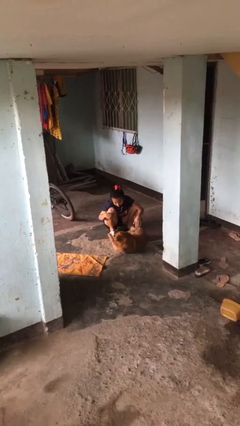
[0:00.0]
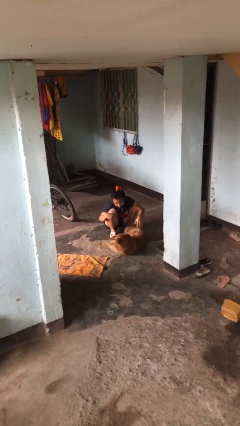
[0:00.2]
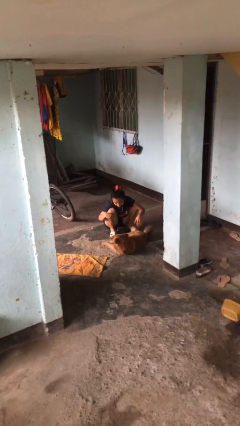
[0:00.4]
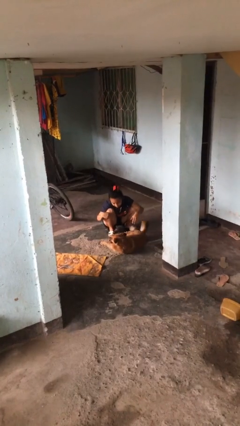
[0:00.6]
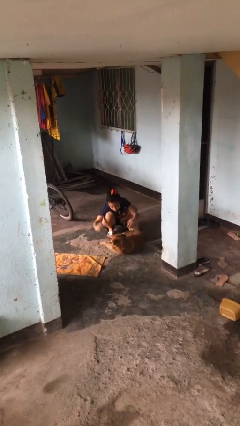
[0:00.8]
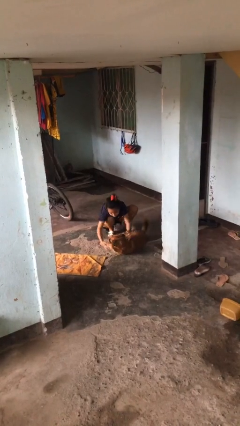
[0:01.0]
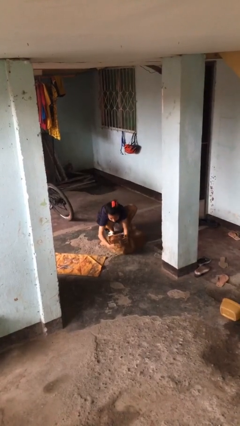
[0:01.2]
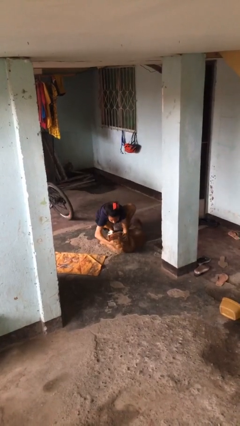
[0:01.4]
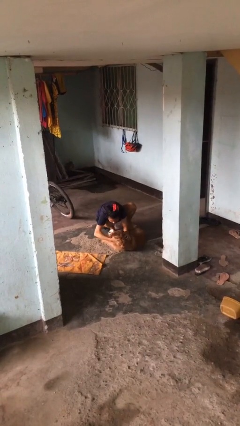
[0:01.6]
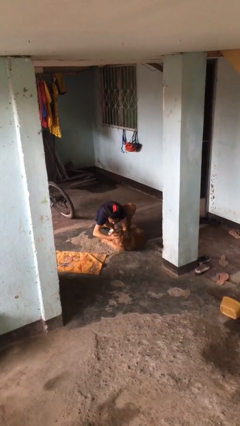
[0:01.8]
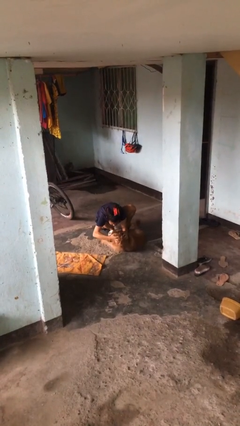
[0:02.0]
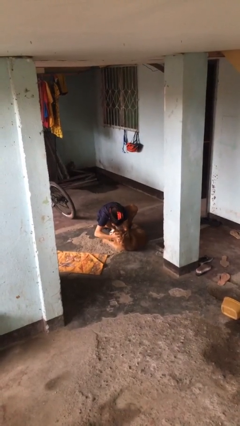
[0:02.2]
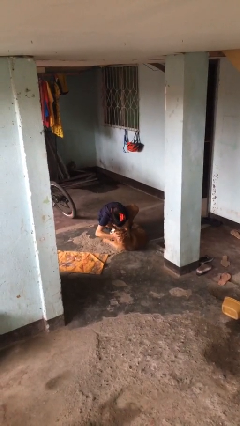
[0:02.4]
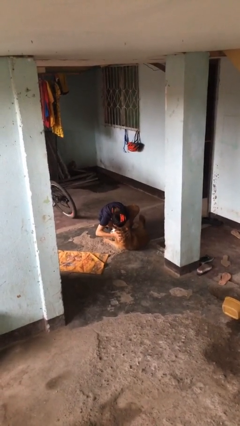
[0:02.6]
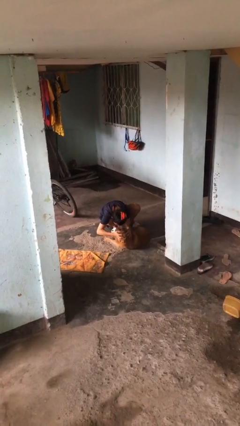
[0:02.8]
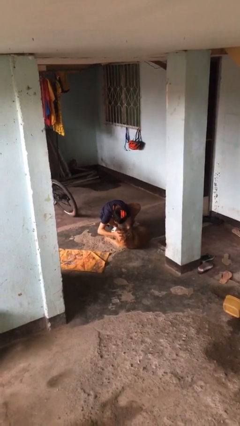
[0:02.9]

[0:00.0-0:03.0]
person hugs dog

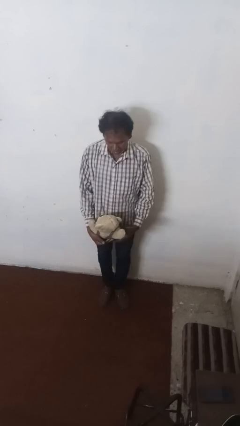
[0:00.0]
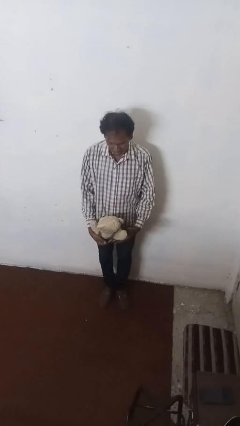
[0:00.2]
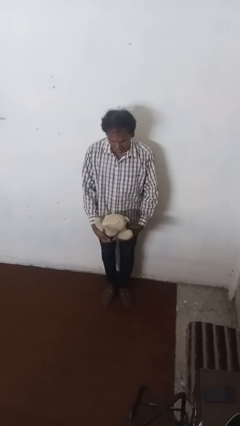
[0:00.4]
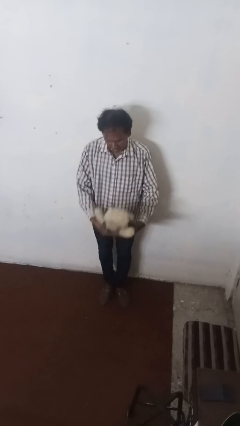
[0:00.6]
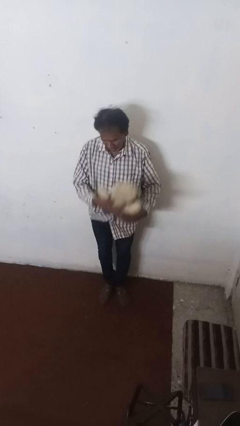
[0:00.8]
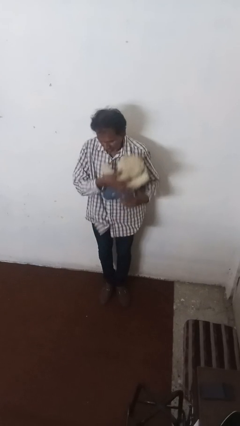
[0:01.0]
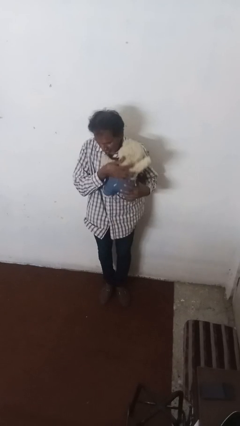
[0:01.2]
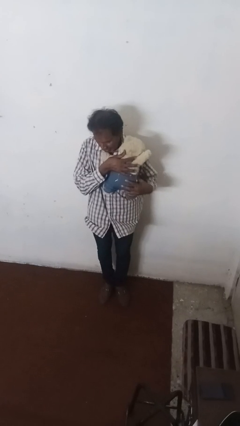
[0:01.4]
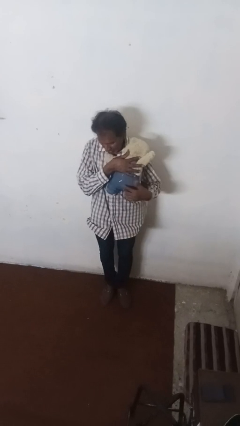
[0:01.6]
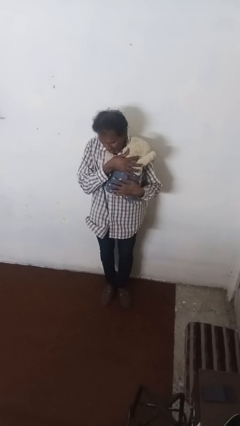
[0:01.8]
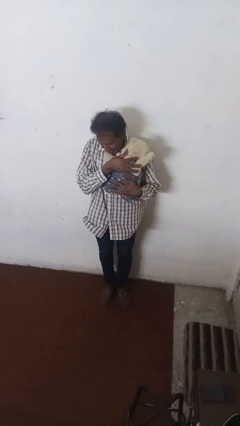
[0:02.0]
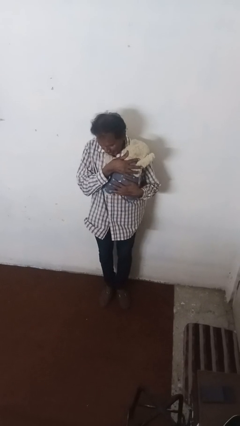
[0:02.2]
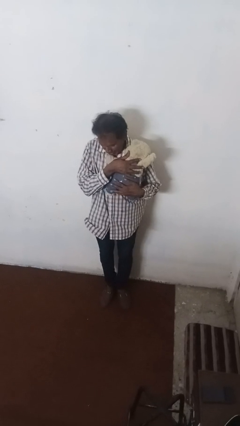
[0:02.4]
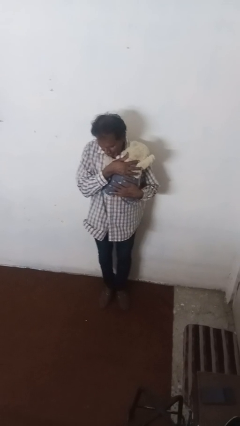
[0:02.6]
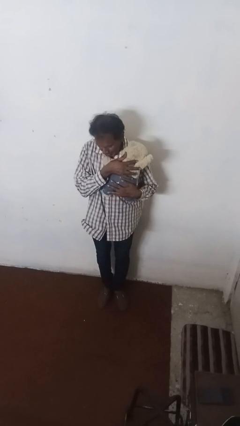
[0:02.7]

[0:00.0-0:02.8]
person hugs stuffed animal

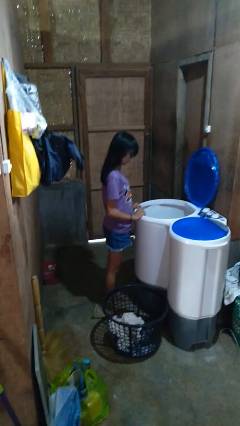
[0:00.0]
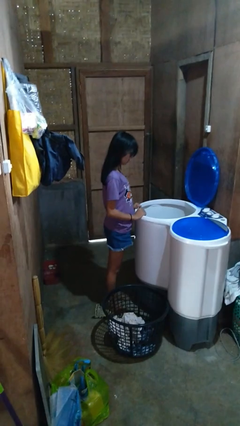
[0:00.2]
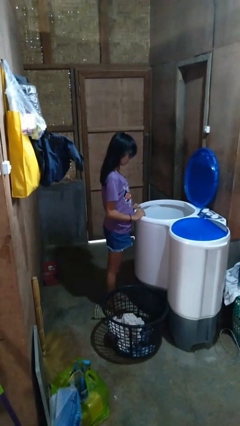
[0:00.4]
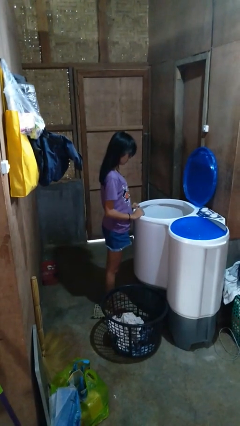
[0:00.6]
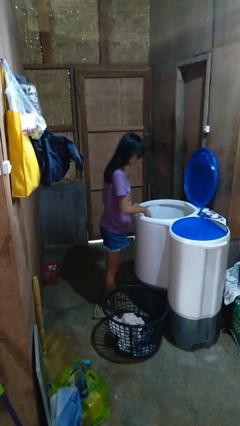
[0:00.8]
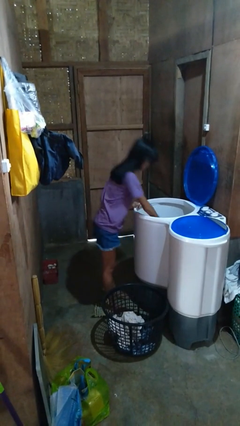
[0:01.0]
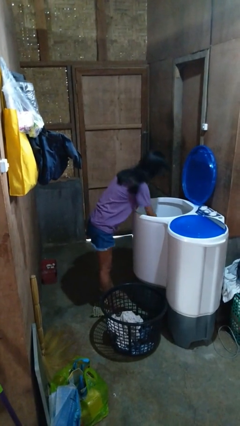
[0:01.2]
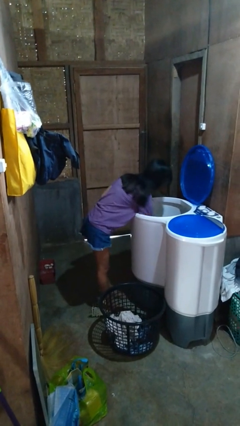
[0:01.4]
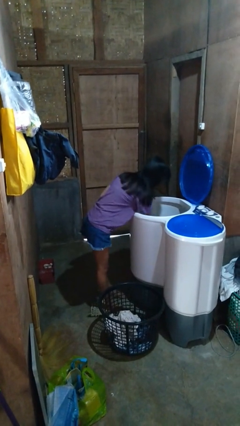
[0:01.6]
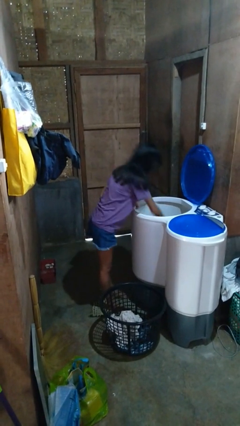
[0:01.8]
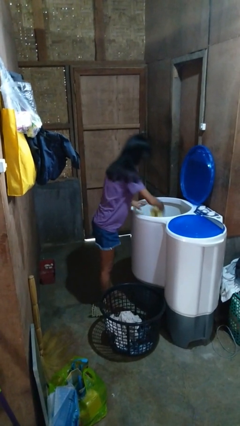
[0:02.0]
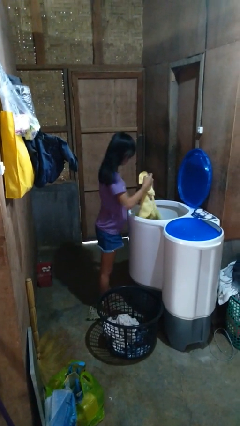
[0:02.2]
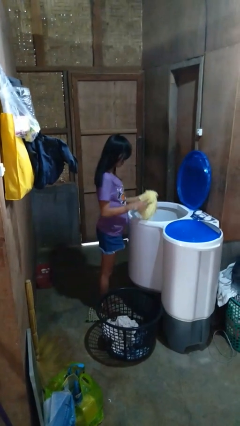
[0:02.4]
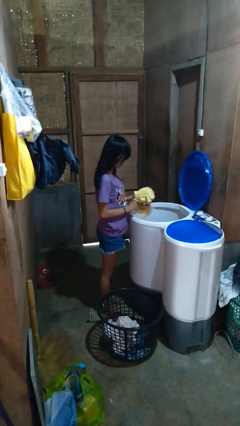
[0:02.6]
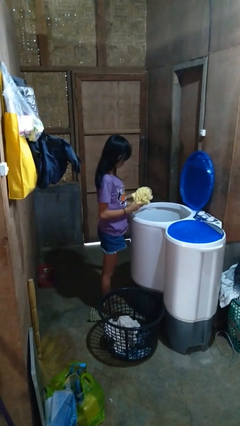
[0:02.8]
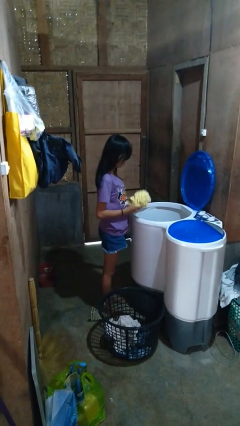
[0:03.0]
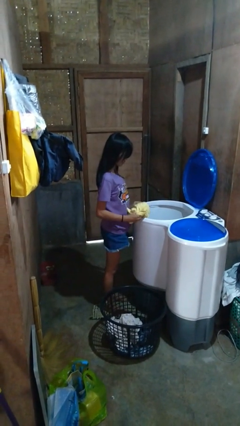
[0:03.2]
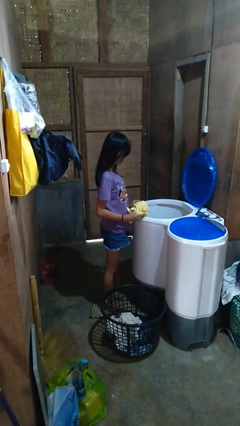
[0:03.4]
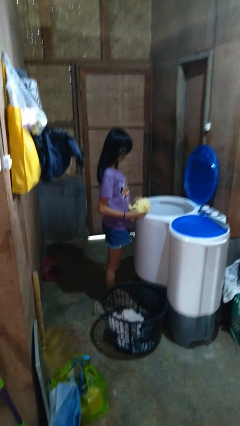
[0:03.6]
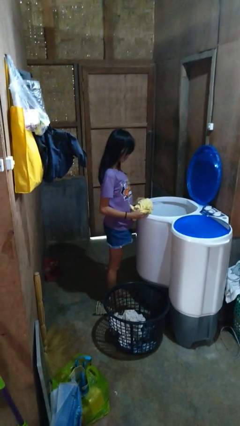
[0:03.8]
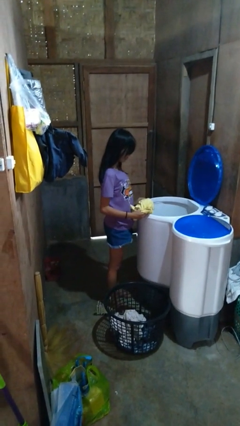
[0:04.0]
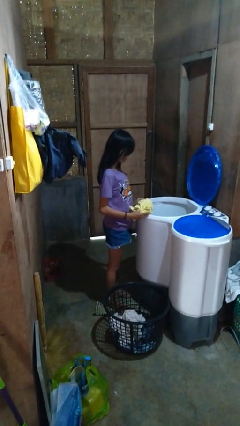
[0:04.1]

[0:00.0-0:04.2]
person loads clotheswasher

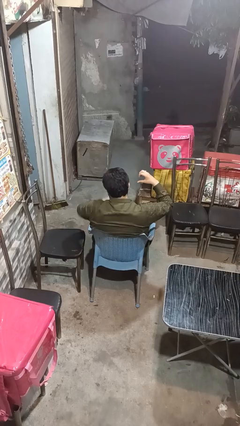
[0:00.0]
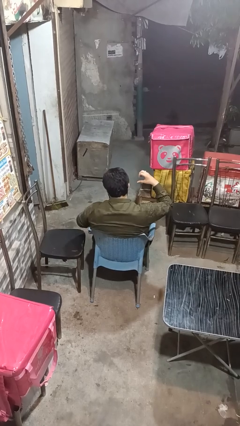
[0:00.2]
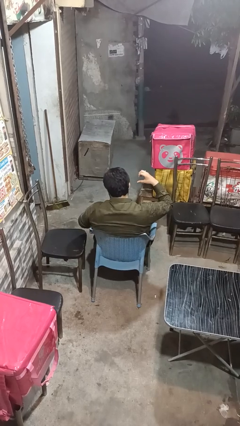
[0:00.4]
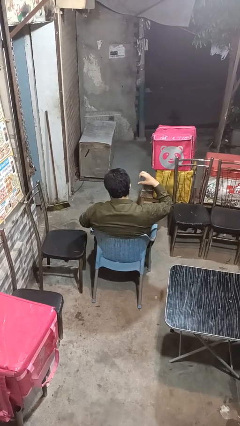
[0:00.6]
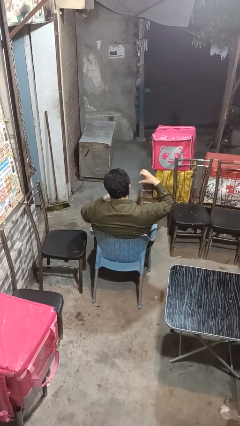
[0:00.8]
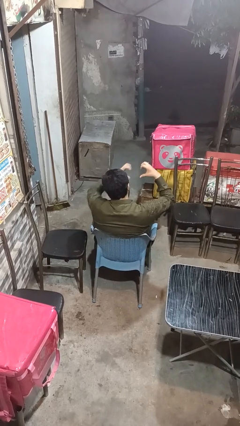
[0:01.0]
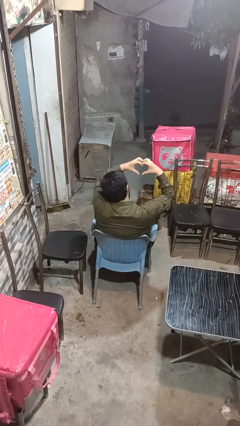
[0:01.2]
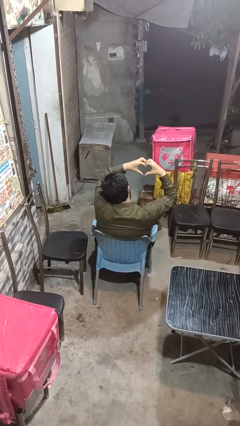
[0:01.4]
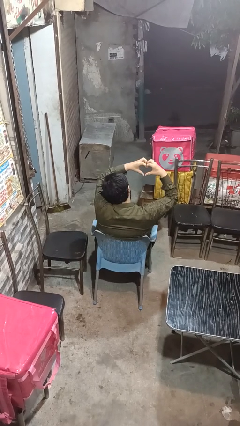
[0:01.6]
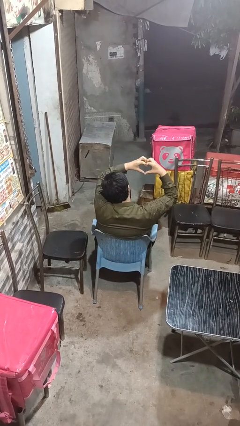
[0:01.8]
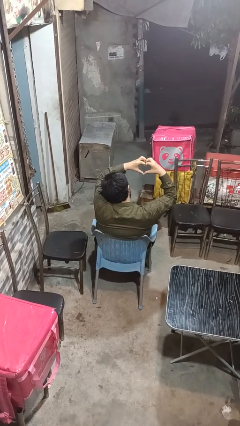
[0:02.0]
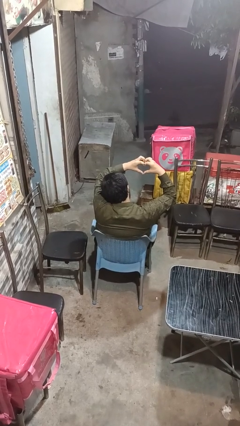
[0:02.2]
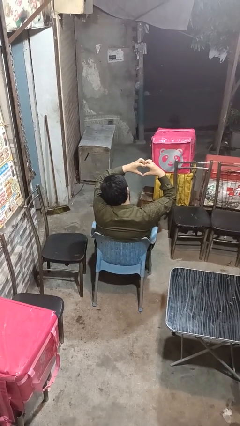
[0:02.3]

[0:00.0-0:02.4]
person gestures heart

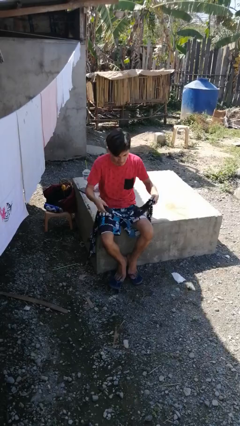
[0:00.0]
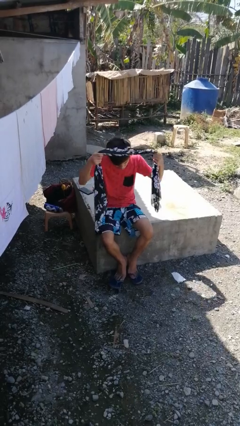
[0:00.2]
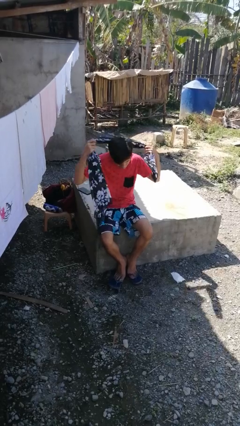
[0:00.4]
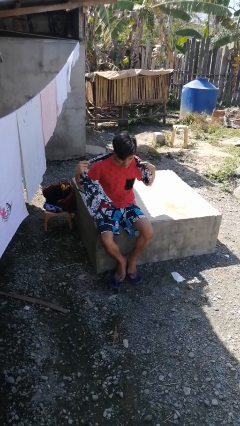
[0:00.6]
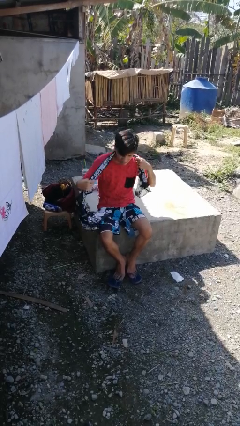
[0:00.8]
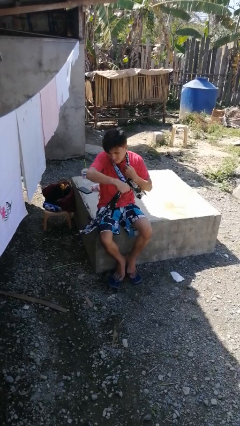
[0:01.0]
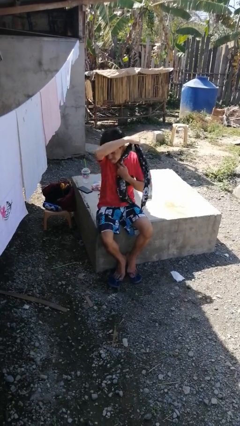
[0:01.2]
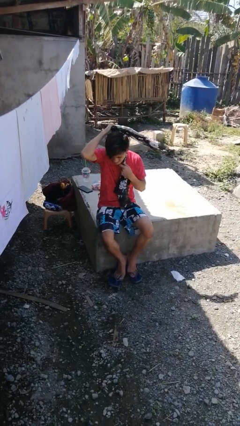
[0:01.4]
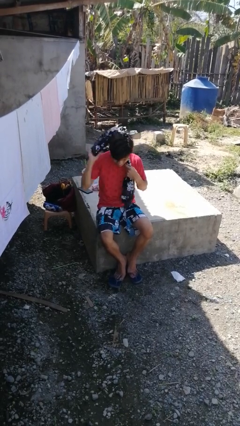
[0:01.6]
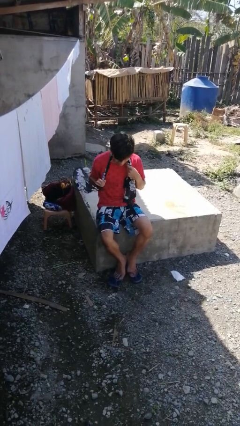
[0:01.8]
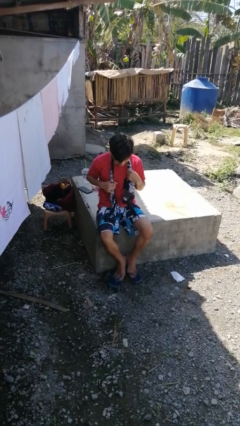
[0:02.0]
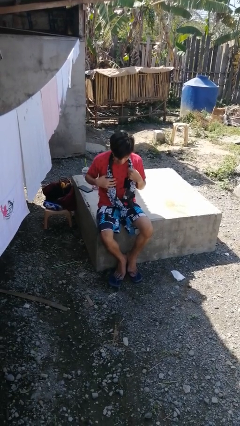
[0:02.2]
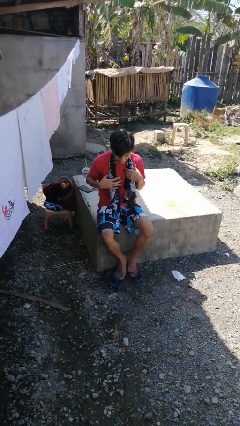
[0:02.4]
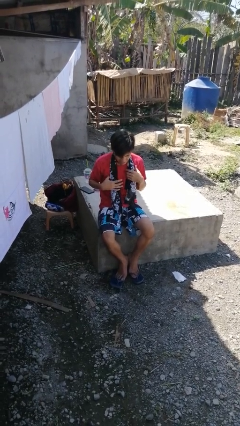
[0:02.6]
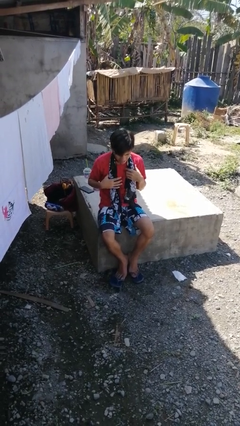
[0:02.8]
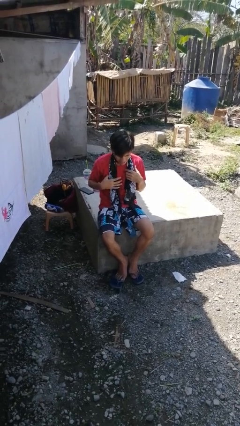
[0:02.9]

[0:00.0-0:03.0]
person puts on scarf

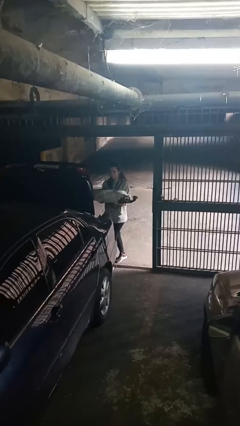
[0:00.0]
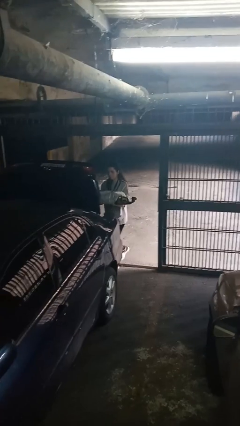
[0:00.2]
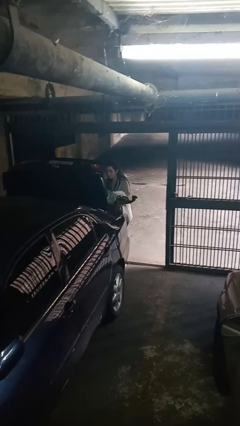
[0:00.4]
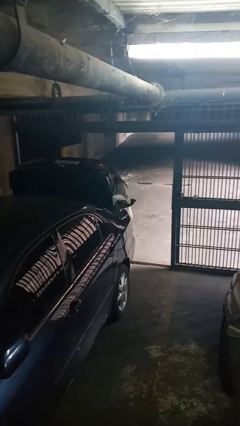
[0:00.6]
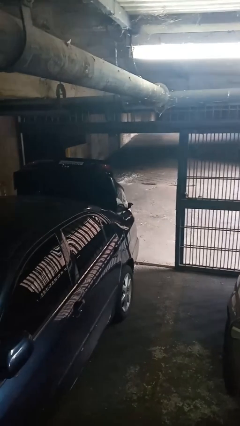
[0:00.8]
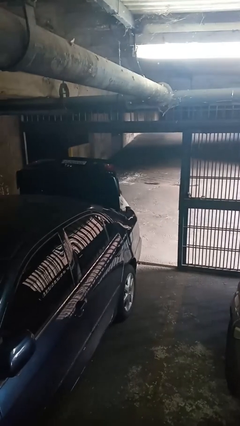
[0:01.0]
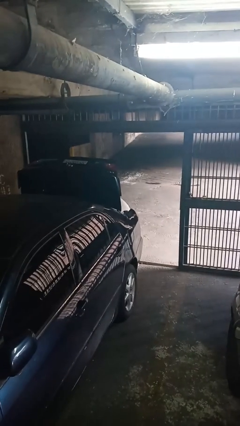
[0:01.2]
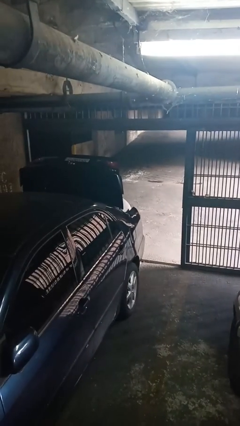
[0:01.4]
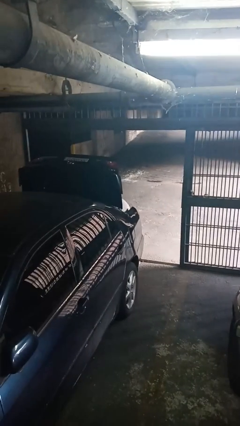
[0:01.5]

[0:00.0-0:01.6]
person loads car
